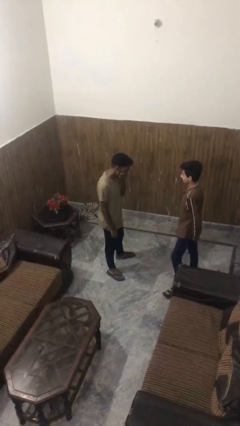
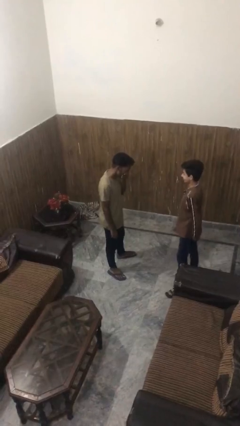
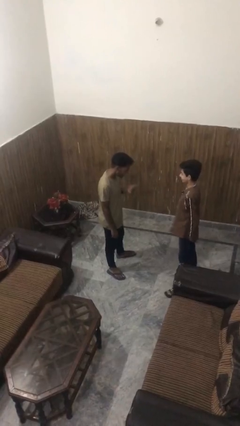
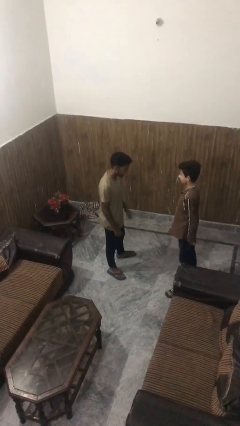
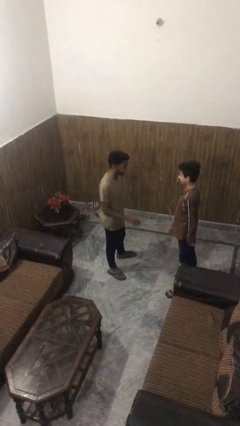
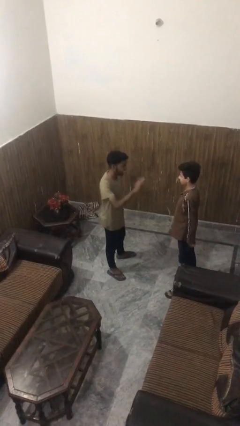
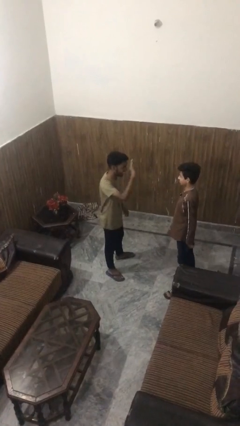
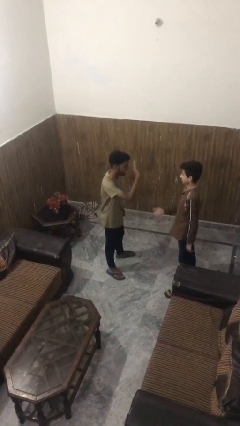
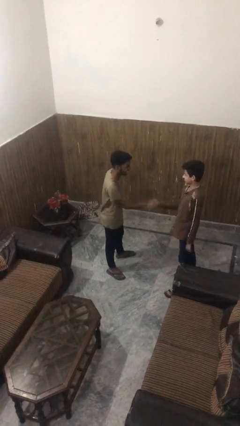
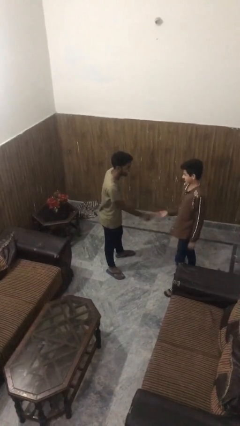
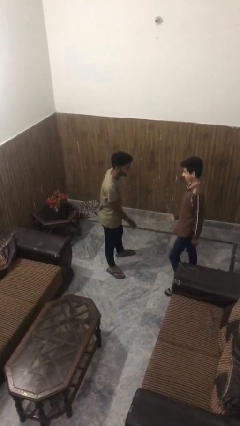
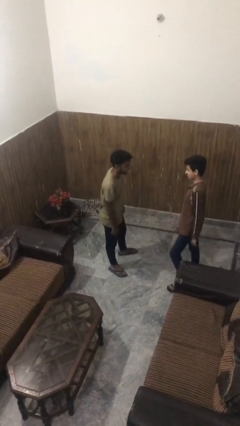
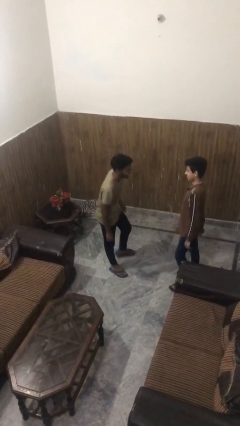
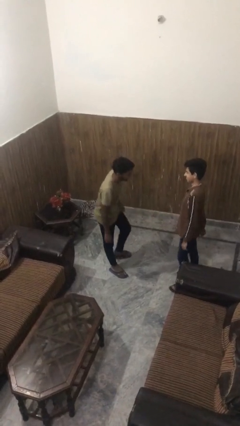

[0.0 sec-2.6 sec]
person laughs with person

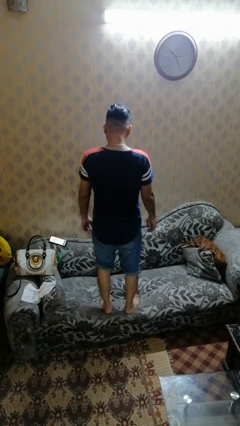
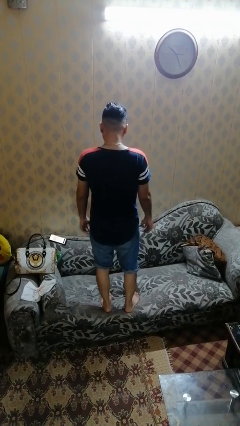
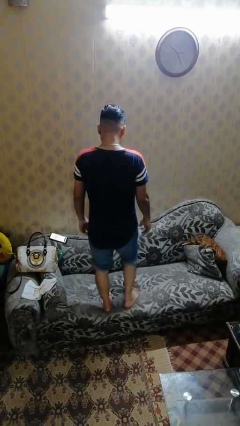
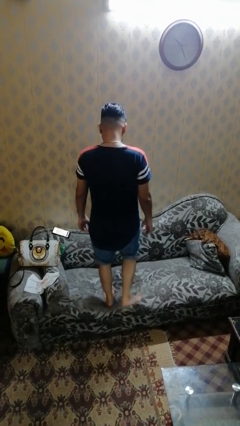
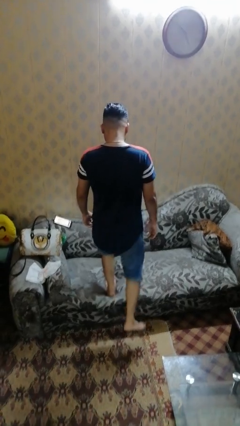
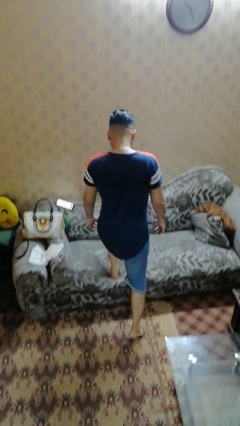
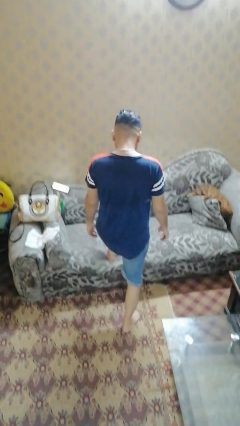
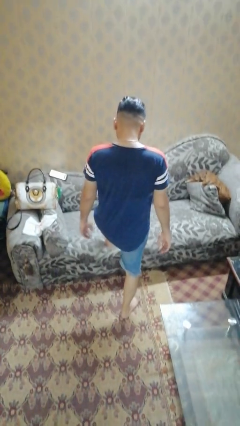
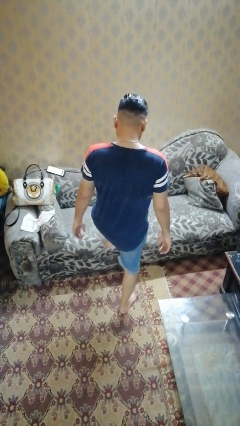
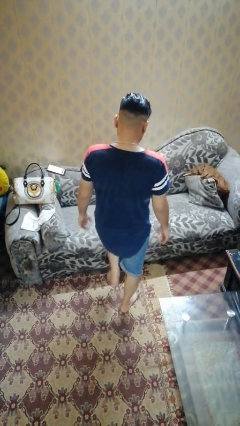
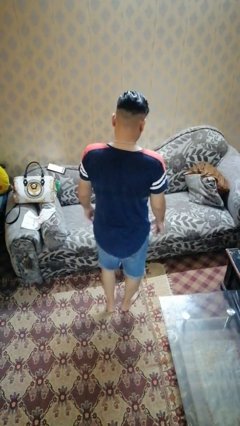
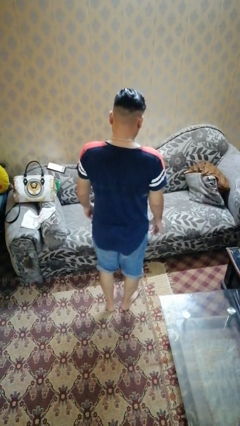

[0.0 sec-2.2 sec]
person climbs off couch

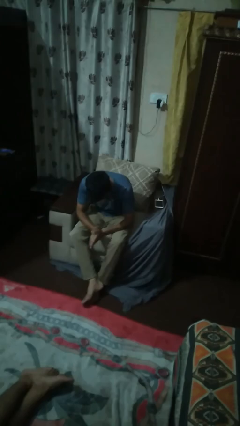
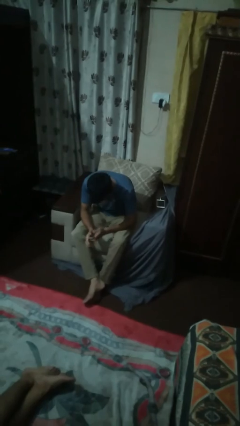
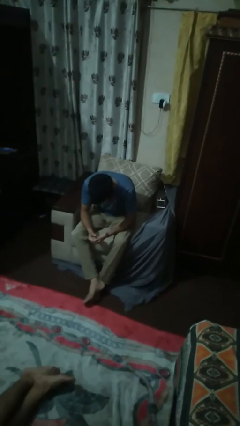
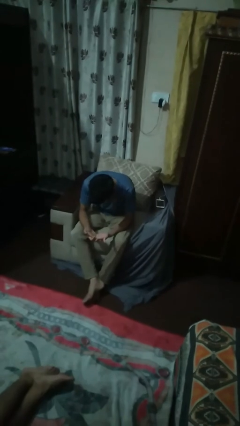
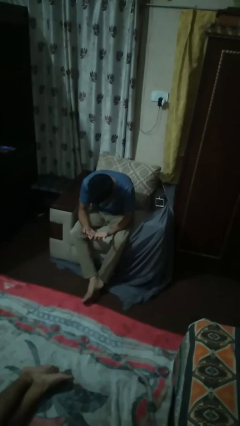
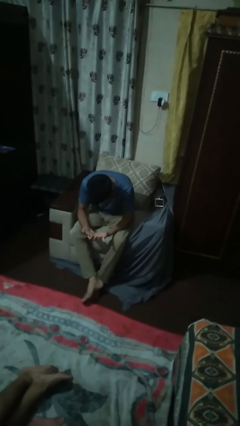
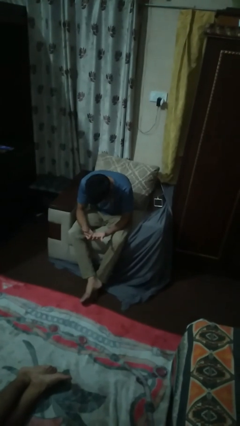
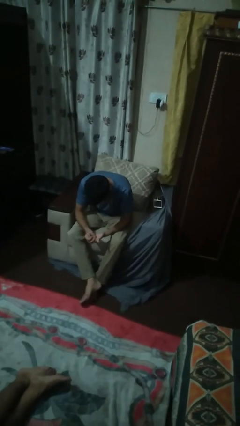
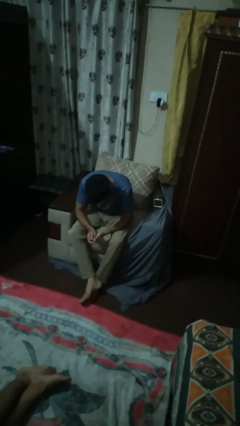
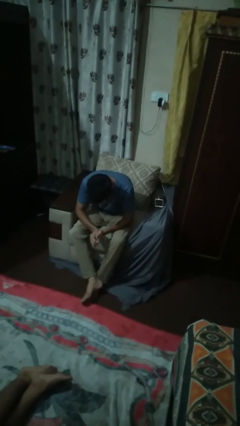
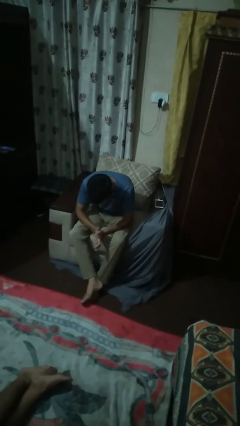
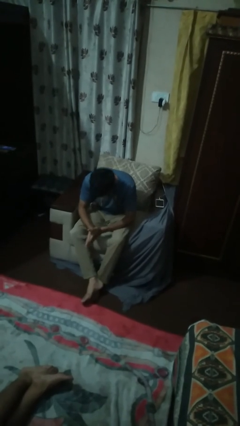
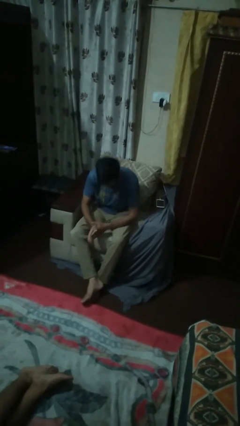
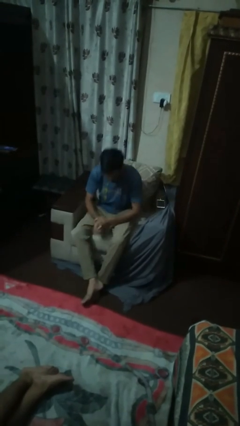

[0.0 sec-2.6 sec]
person looks at hands in lap

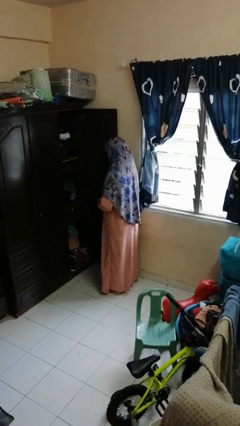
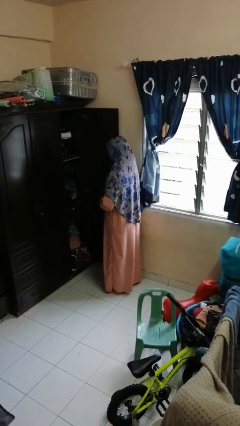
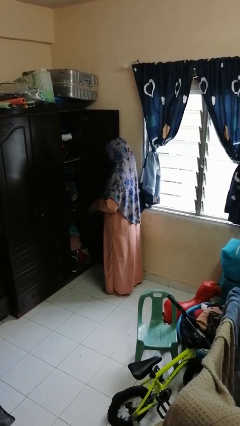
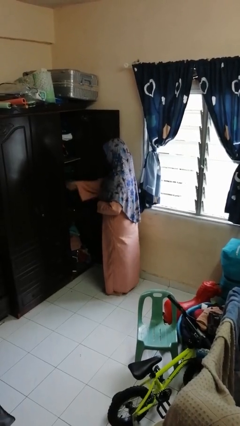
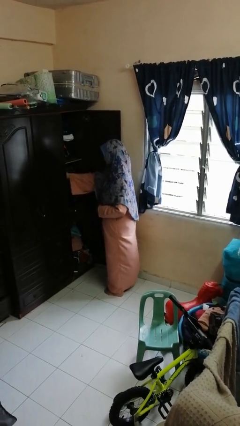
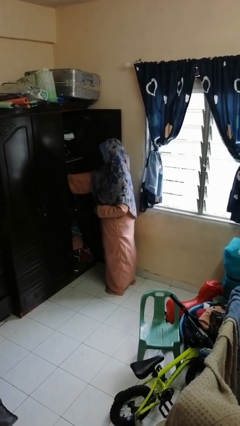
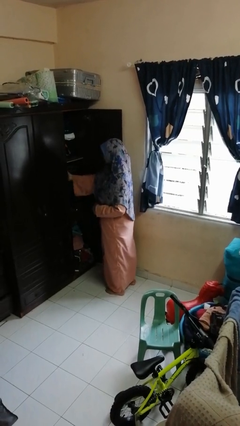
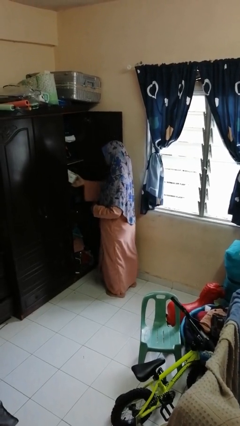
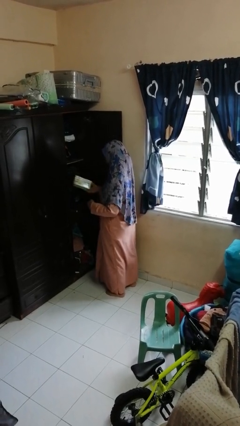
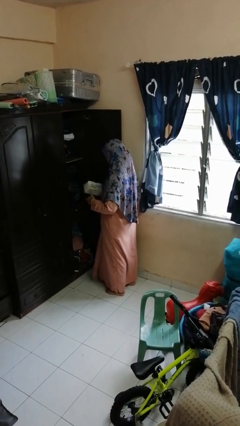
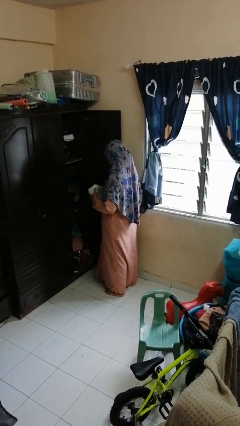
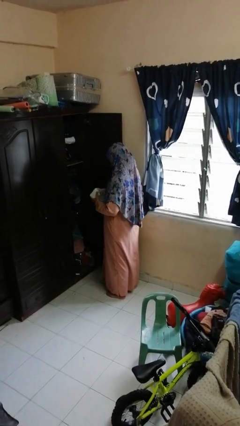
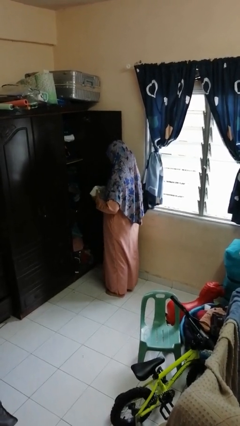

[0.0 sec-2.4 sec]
person picks up object from cabinet

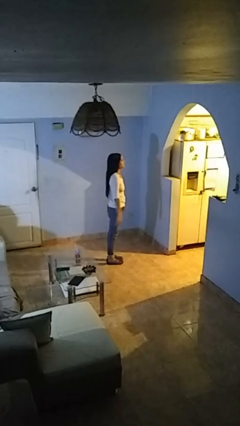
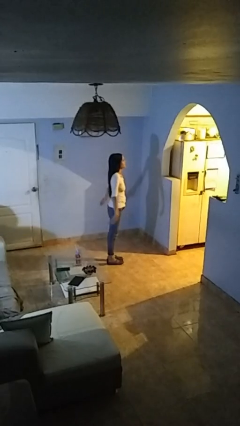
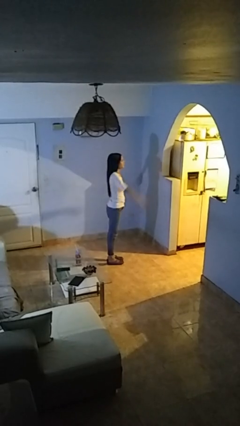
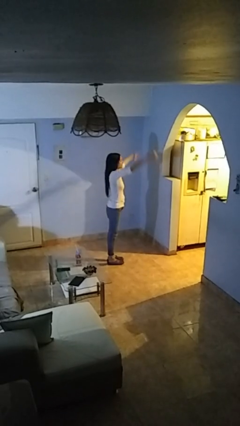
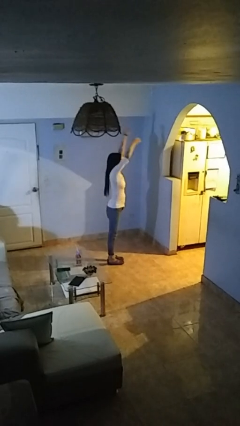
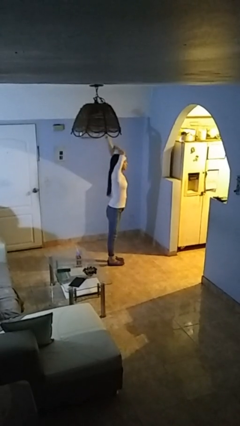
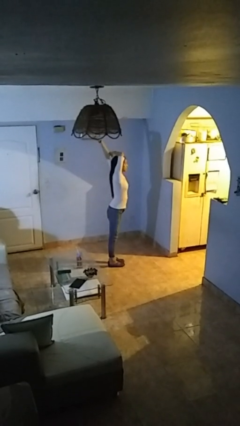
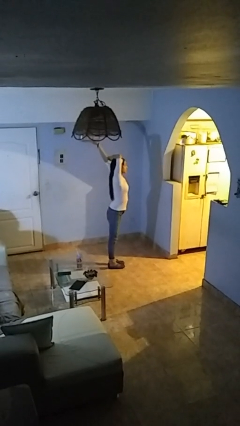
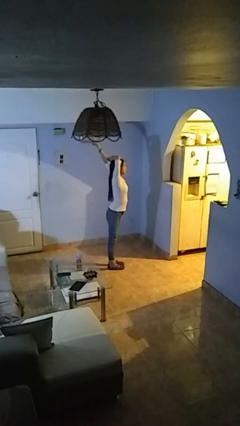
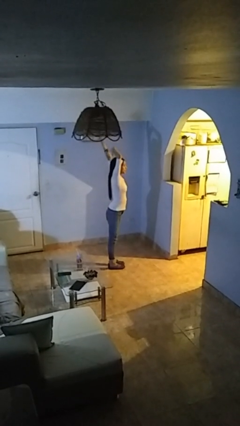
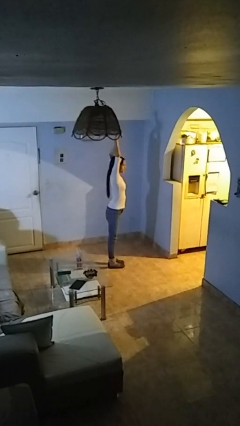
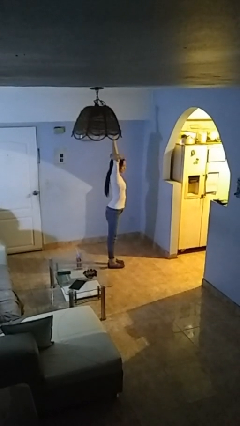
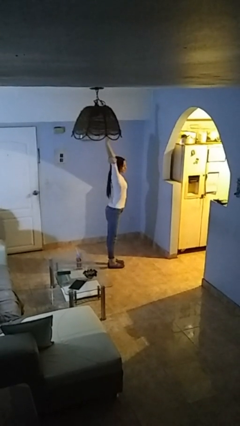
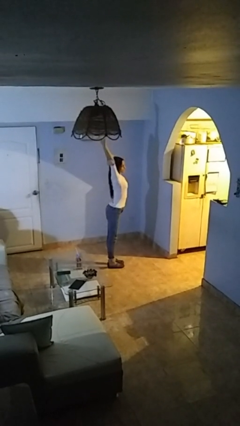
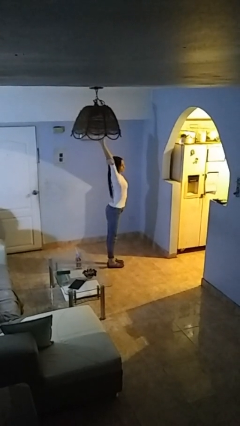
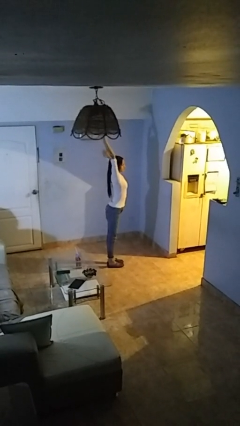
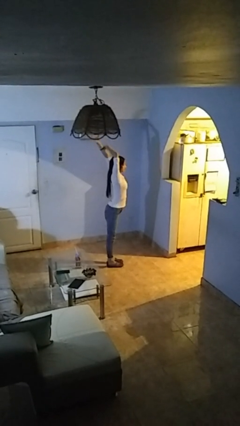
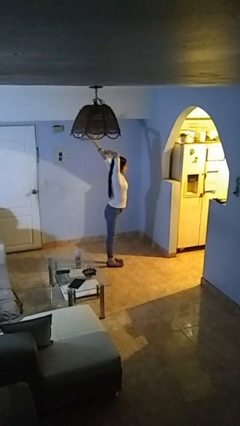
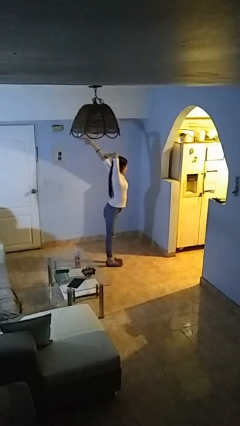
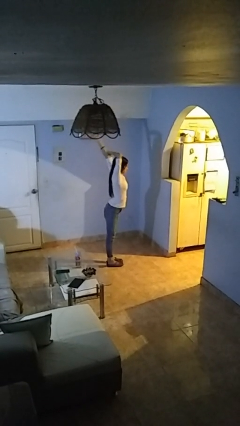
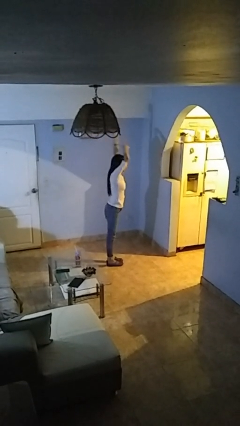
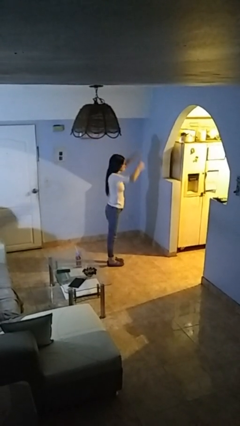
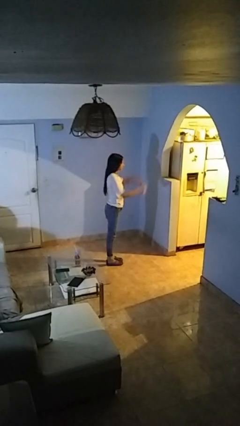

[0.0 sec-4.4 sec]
person stretches arms over head

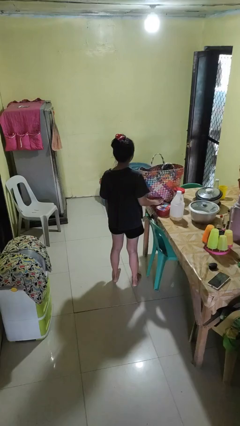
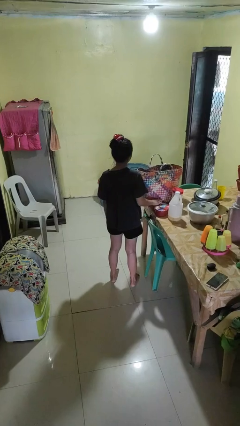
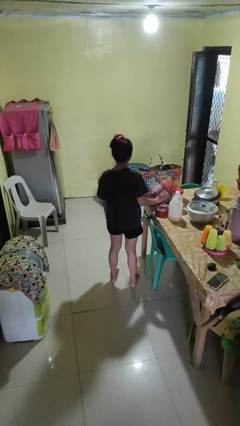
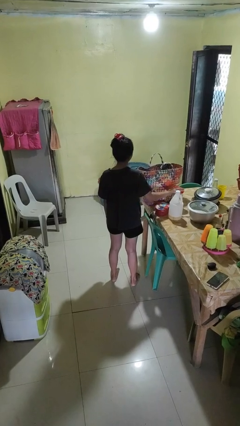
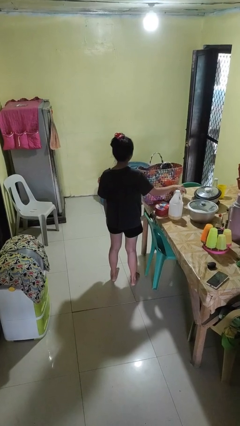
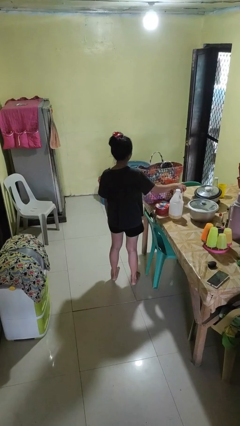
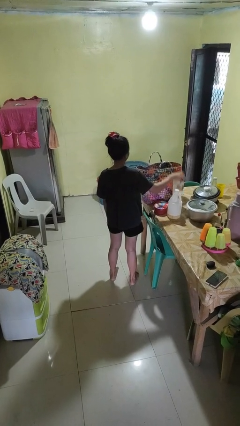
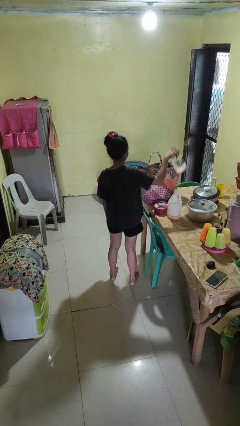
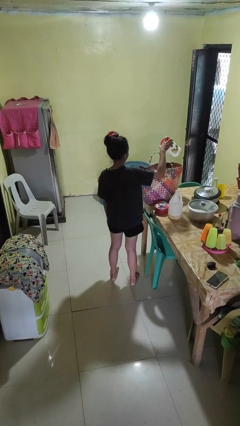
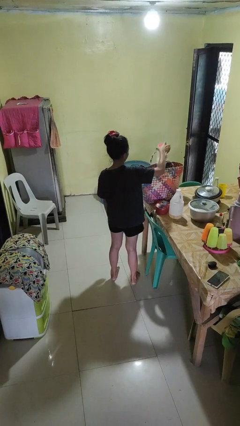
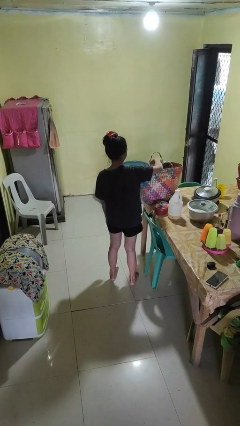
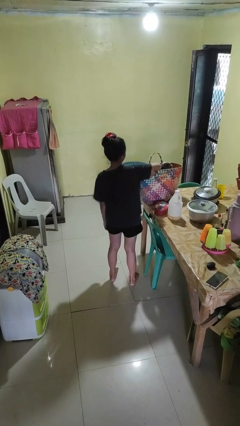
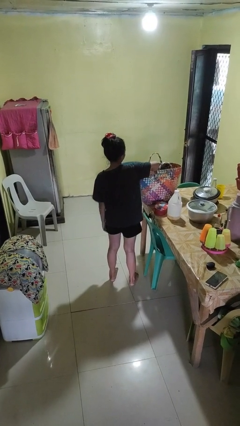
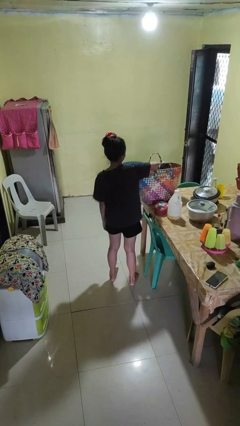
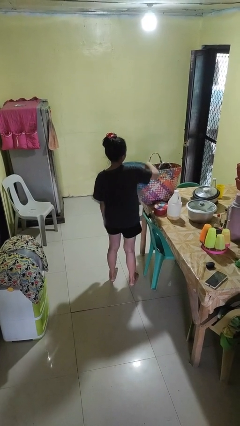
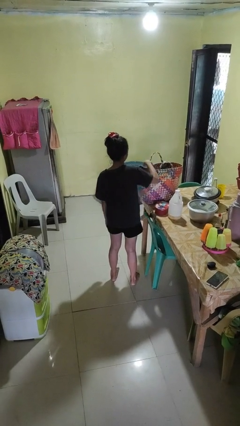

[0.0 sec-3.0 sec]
person puts object into basket

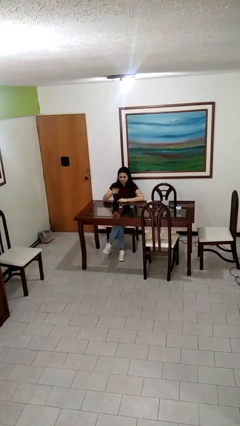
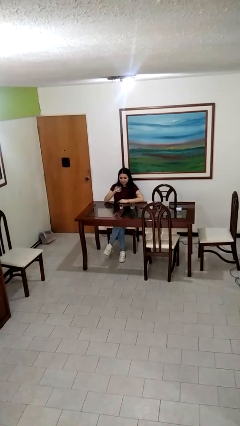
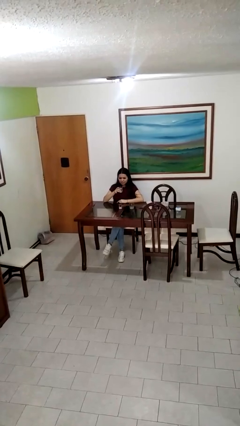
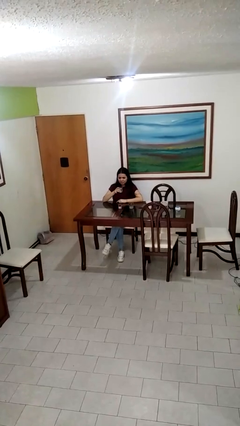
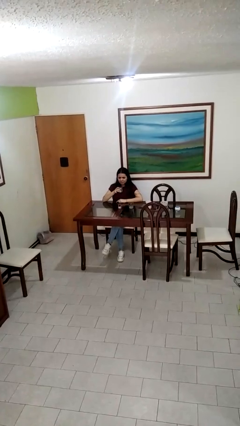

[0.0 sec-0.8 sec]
person picks up object from table
